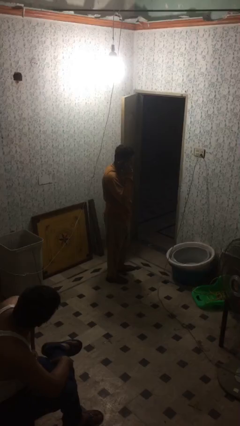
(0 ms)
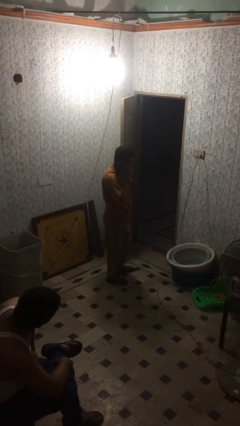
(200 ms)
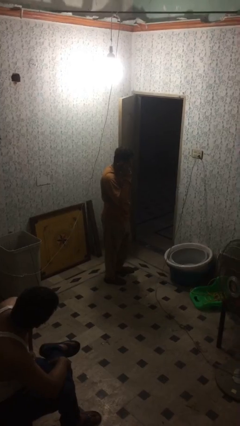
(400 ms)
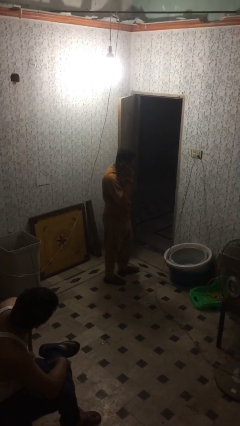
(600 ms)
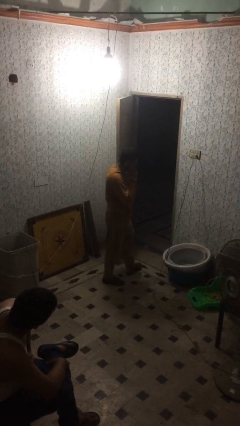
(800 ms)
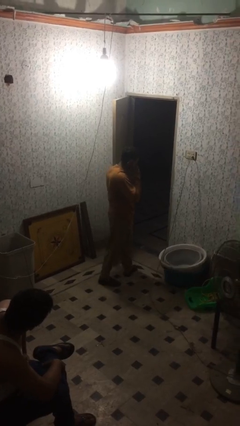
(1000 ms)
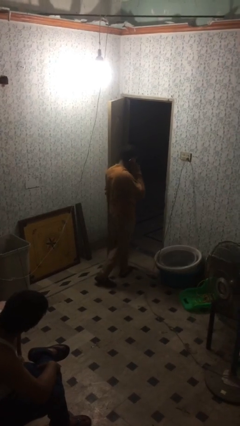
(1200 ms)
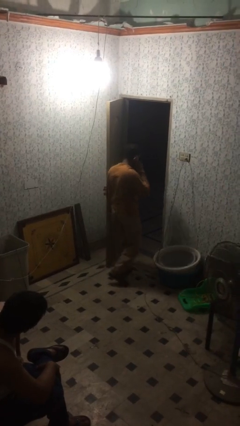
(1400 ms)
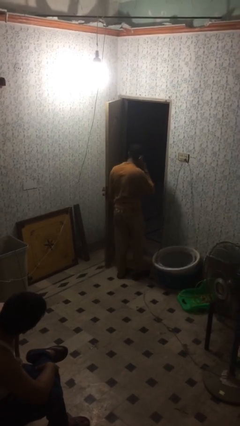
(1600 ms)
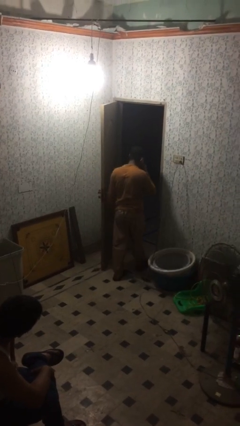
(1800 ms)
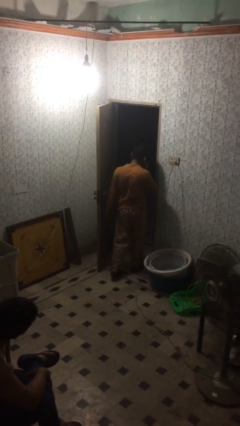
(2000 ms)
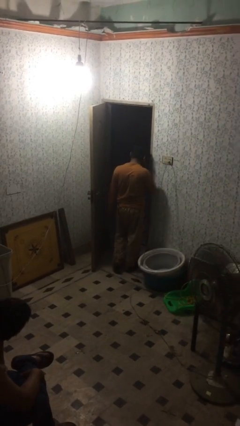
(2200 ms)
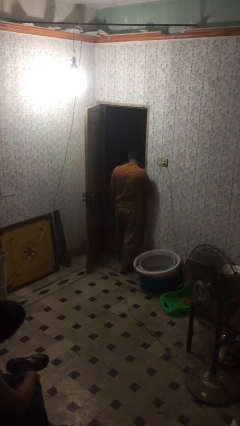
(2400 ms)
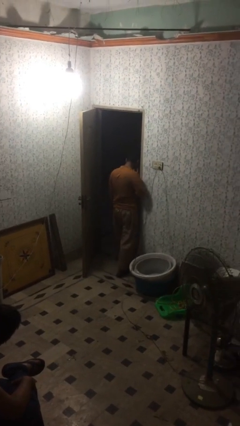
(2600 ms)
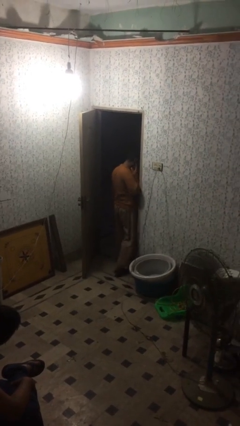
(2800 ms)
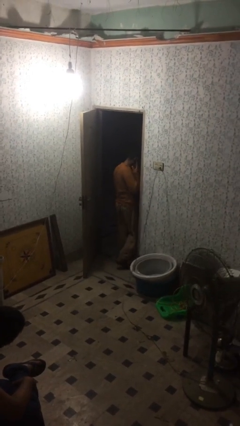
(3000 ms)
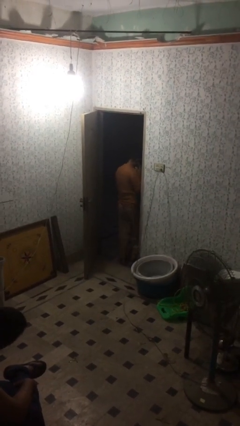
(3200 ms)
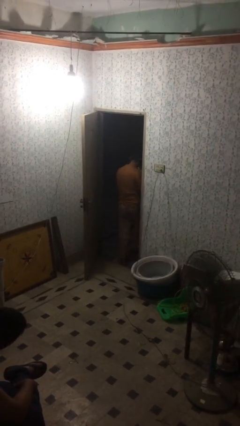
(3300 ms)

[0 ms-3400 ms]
person exits scene through structure

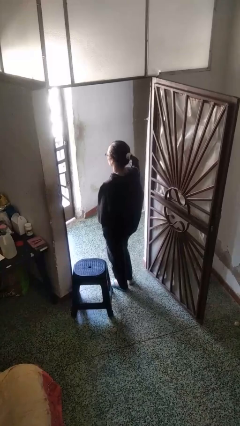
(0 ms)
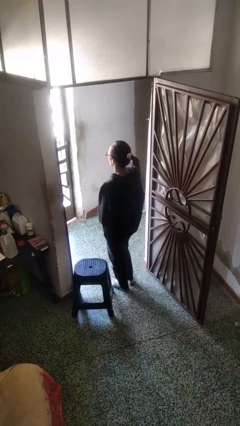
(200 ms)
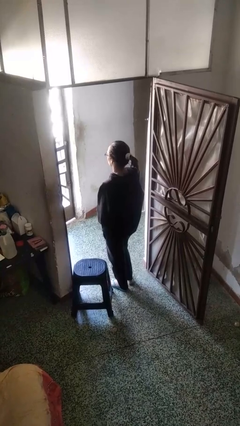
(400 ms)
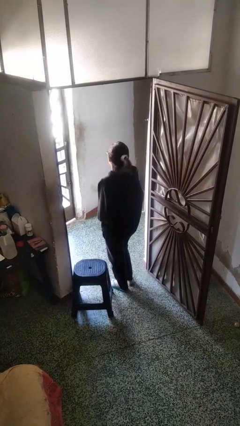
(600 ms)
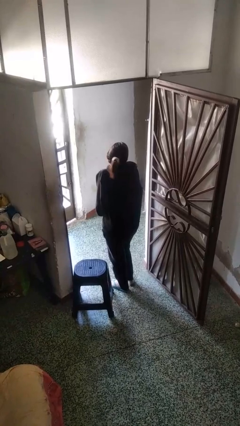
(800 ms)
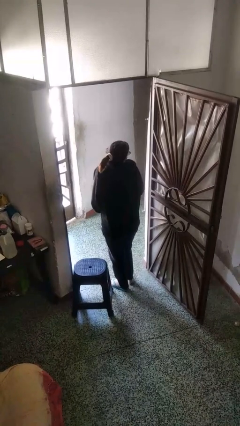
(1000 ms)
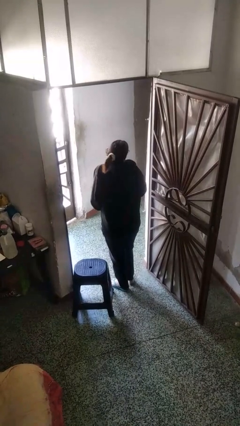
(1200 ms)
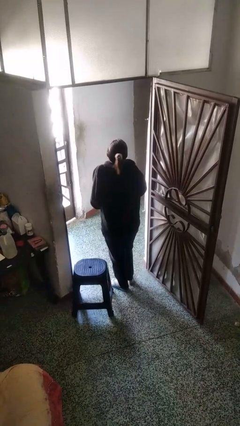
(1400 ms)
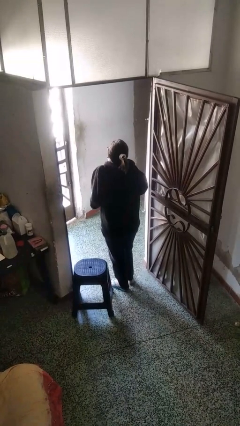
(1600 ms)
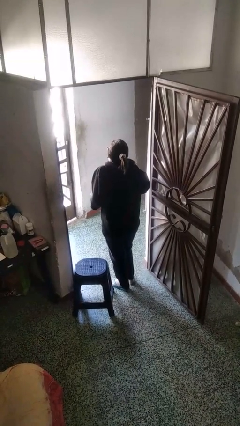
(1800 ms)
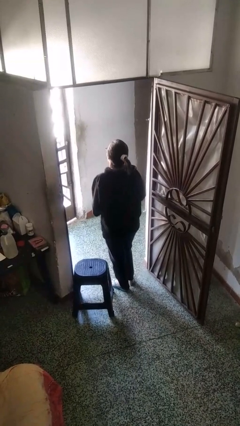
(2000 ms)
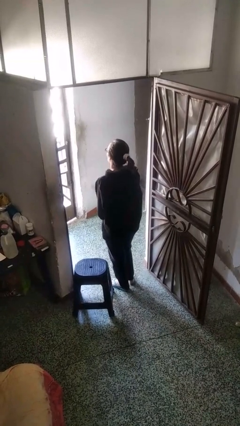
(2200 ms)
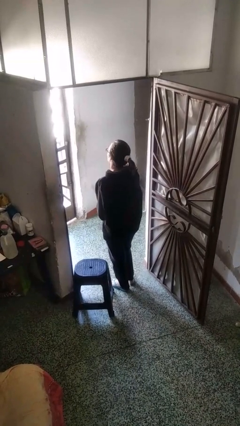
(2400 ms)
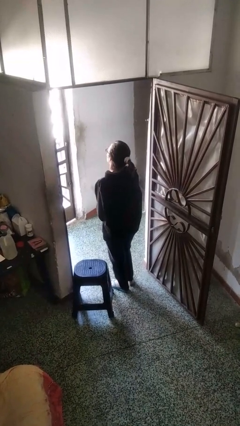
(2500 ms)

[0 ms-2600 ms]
person shrugs

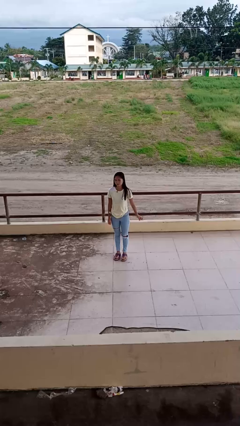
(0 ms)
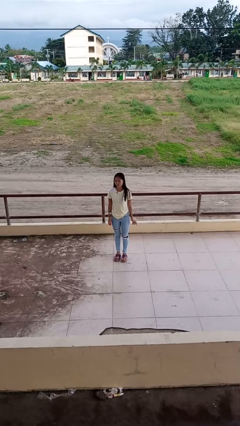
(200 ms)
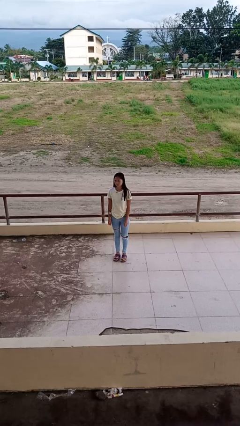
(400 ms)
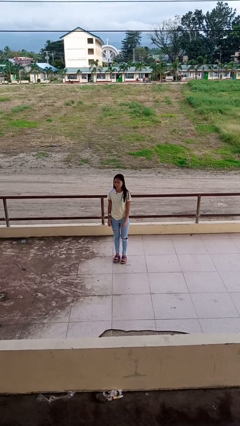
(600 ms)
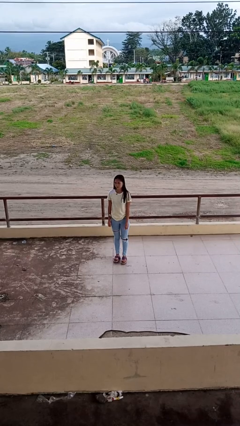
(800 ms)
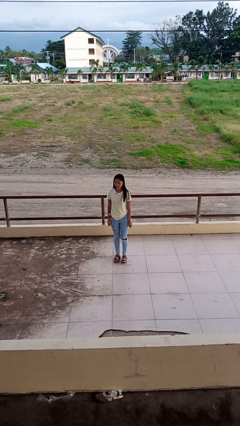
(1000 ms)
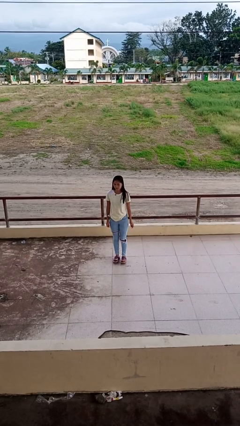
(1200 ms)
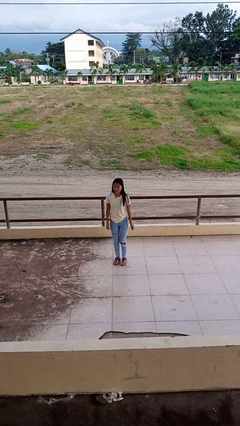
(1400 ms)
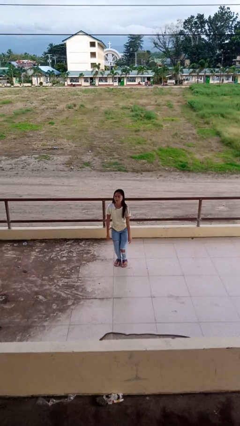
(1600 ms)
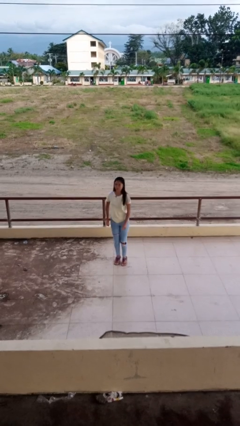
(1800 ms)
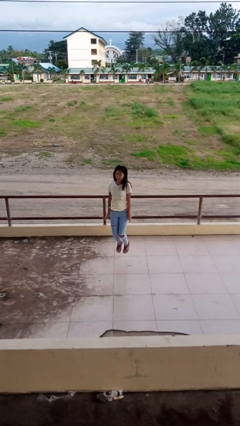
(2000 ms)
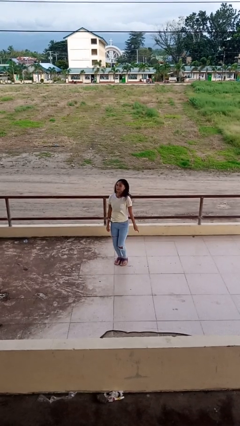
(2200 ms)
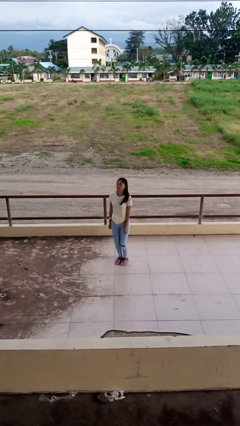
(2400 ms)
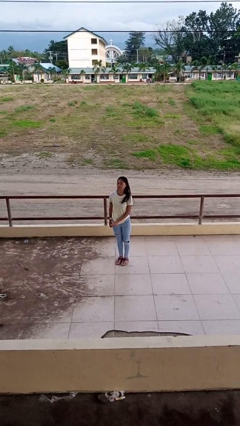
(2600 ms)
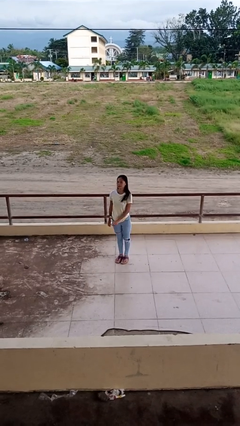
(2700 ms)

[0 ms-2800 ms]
person jumps

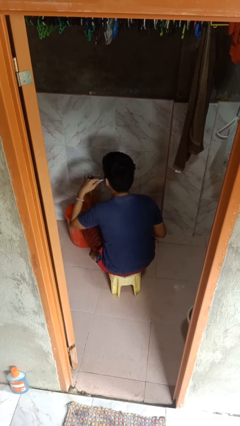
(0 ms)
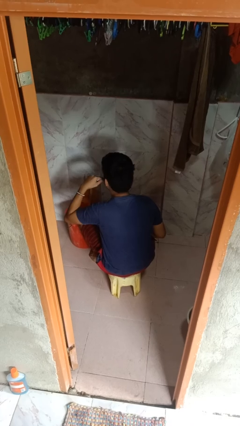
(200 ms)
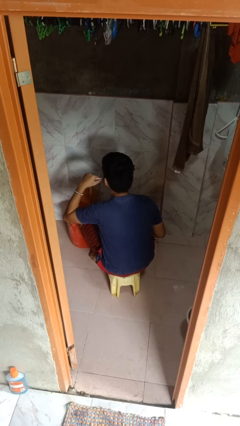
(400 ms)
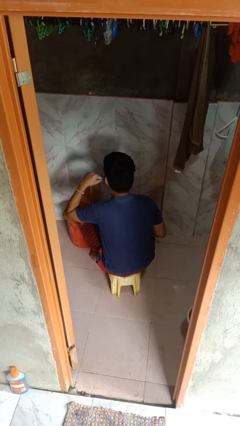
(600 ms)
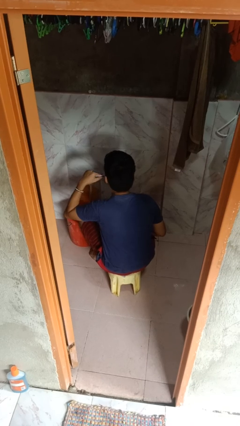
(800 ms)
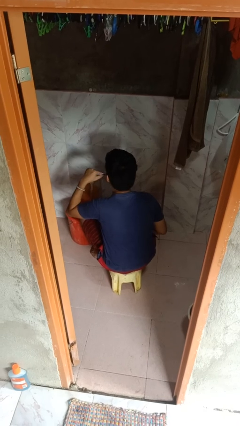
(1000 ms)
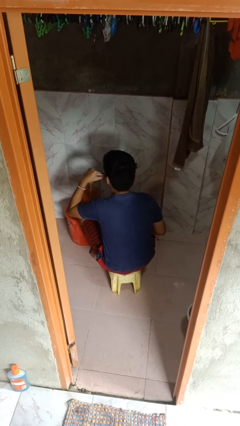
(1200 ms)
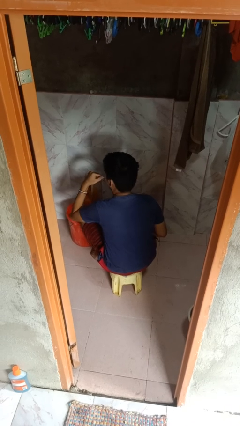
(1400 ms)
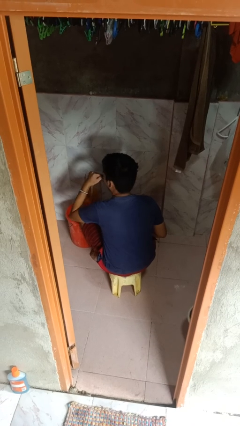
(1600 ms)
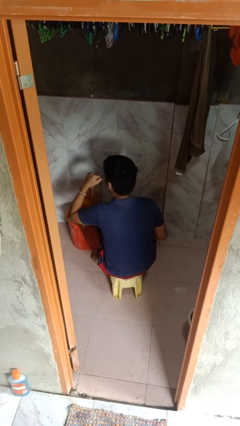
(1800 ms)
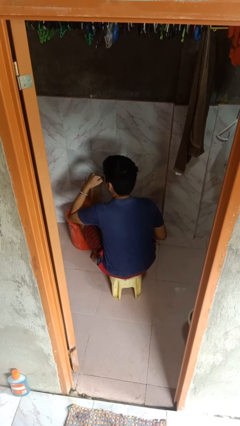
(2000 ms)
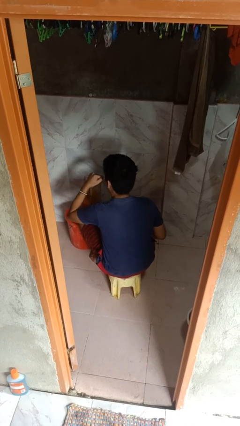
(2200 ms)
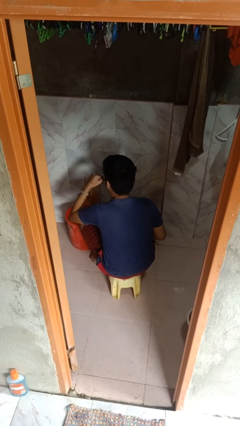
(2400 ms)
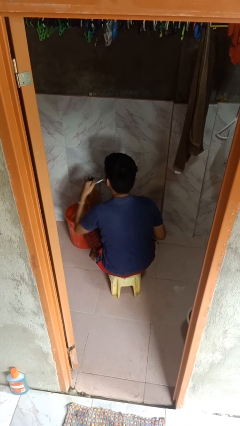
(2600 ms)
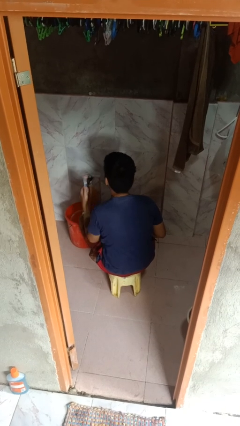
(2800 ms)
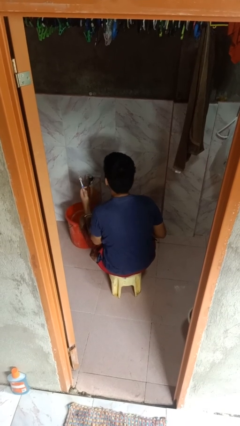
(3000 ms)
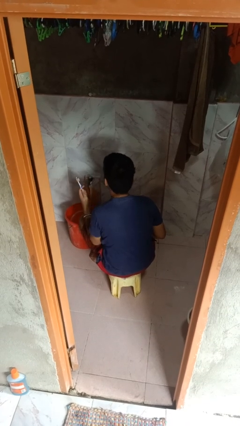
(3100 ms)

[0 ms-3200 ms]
person brushes teeth

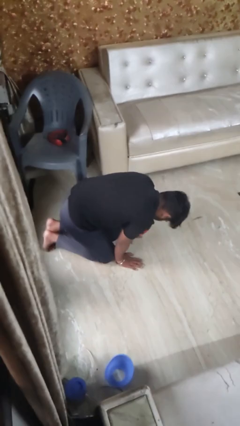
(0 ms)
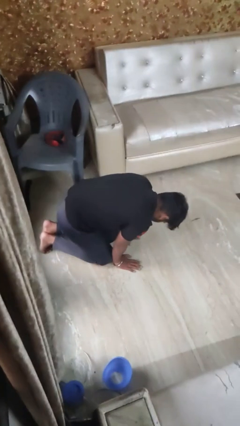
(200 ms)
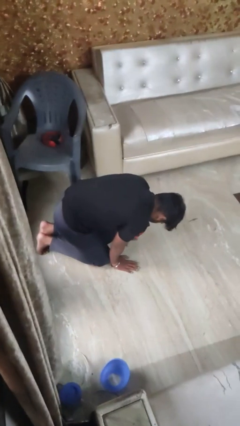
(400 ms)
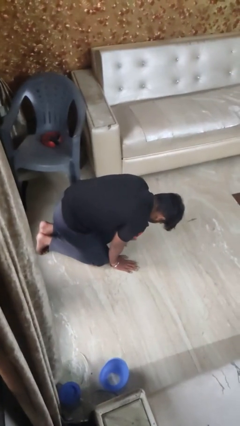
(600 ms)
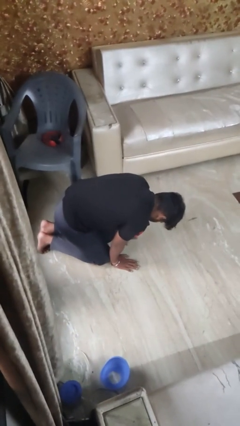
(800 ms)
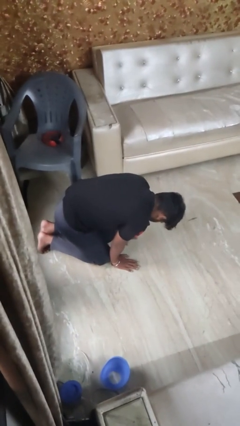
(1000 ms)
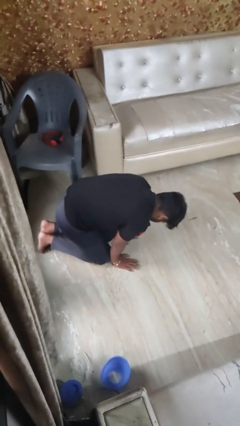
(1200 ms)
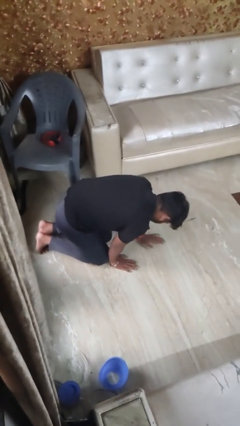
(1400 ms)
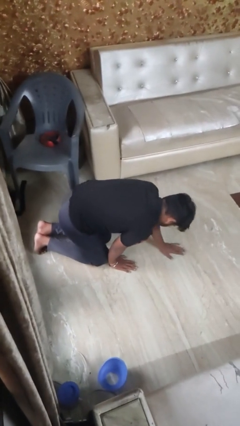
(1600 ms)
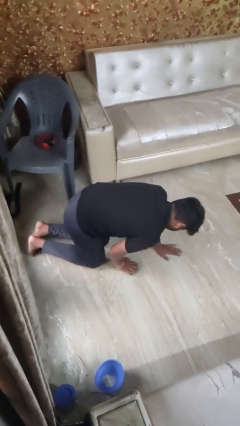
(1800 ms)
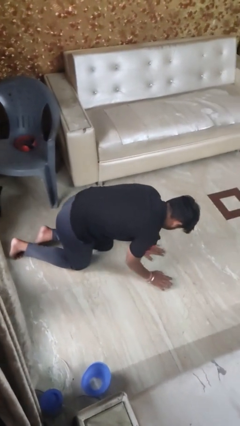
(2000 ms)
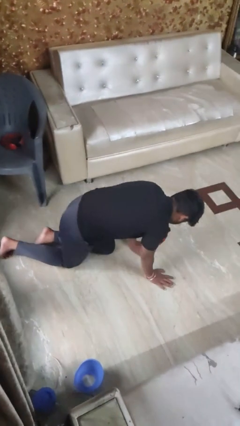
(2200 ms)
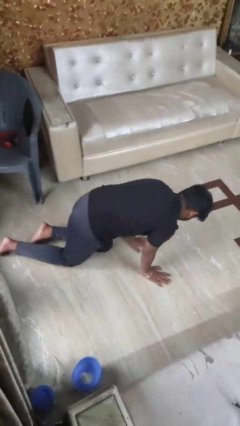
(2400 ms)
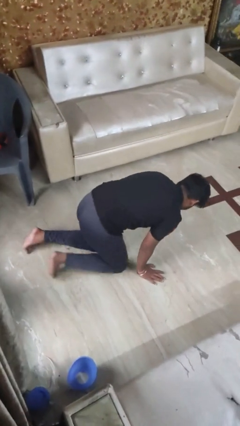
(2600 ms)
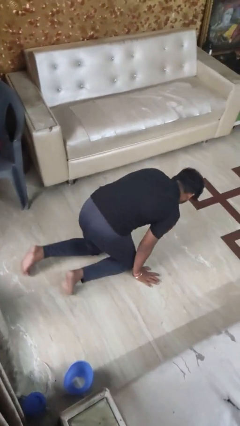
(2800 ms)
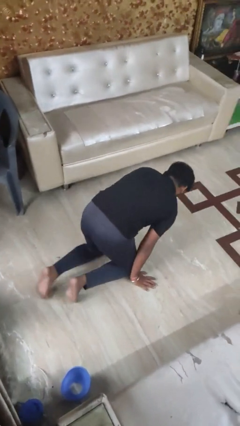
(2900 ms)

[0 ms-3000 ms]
person crawls

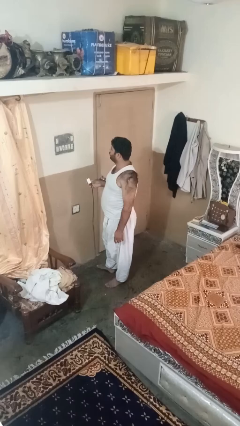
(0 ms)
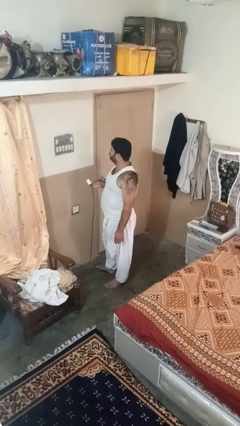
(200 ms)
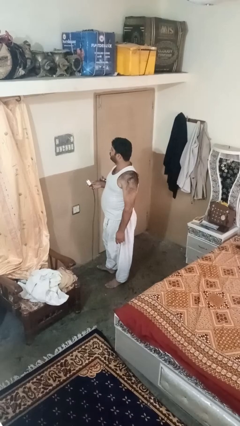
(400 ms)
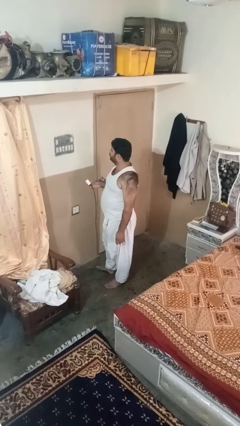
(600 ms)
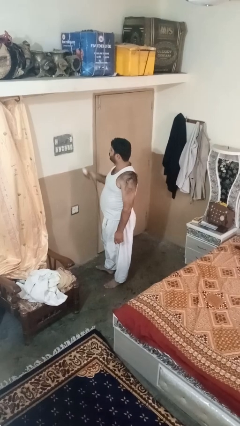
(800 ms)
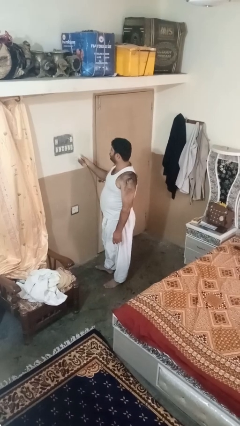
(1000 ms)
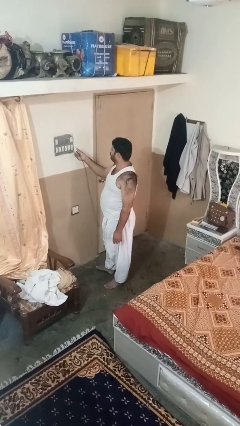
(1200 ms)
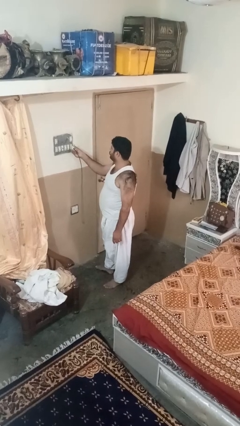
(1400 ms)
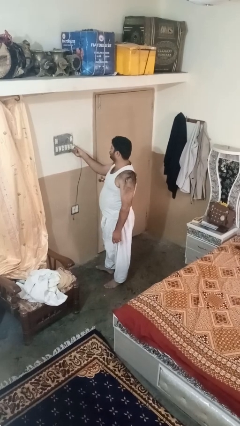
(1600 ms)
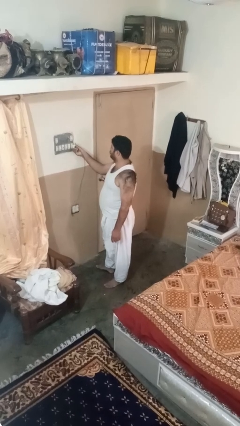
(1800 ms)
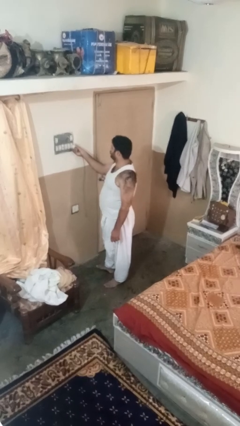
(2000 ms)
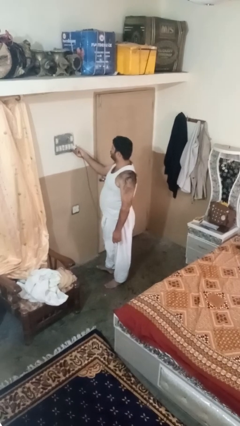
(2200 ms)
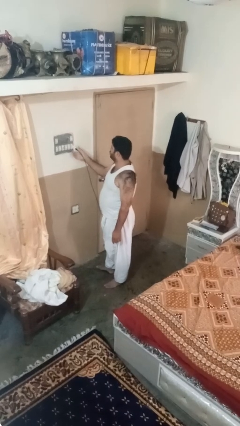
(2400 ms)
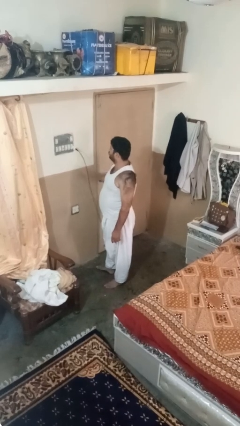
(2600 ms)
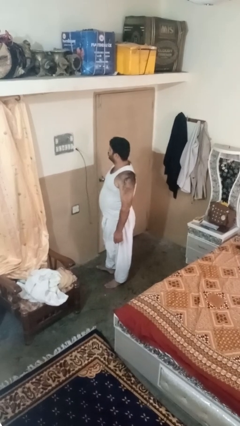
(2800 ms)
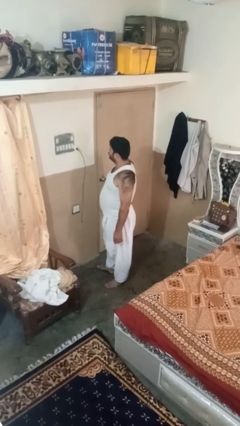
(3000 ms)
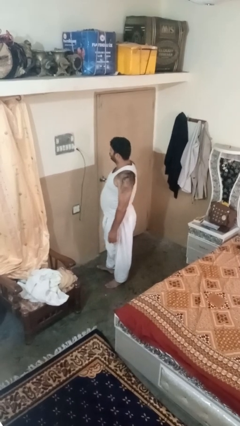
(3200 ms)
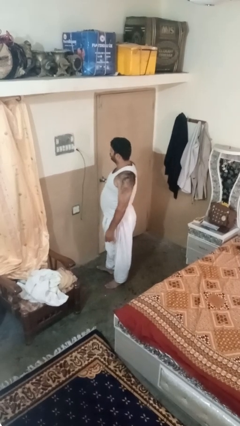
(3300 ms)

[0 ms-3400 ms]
person plugs into electrical socket
